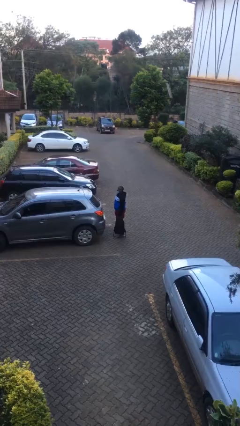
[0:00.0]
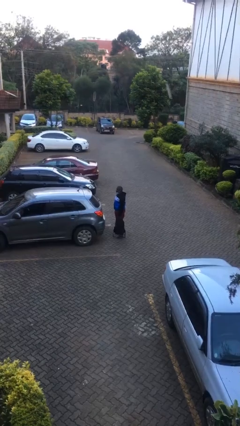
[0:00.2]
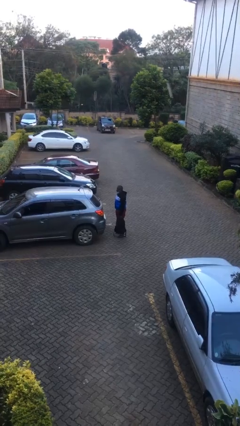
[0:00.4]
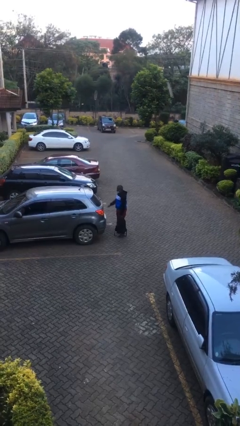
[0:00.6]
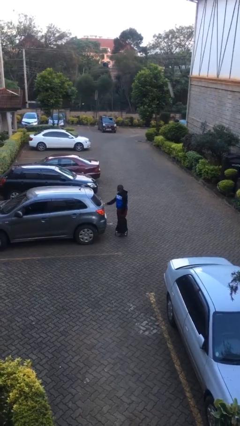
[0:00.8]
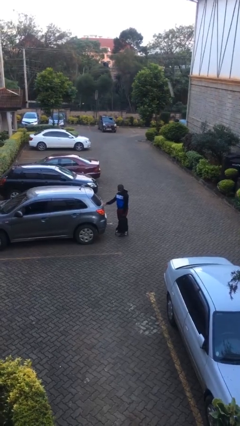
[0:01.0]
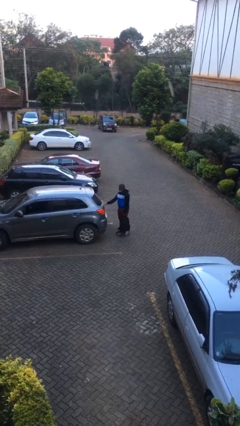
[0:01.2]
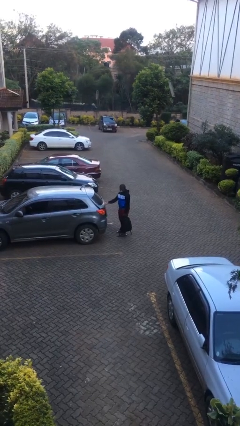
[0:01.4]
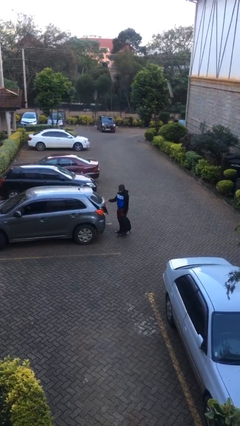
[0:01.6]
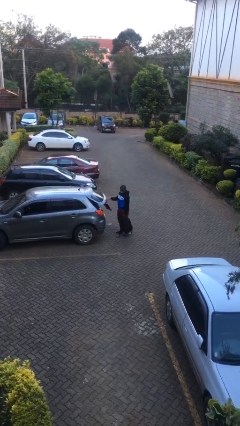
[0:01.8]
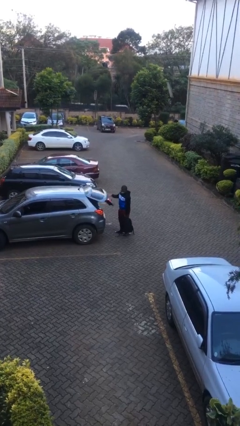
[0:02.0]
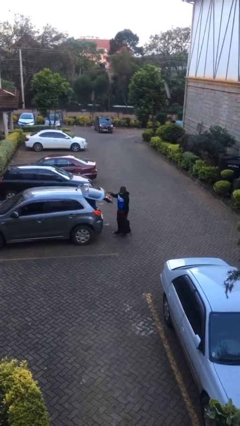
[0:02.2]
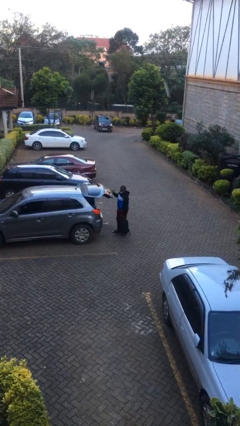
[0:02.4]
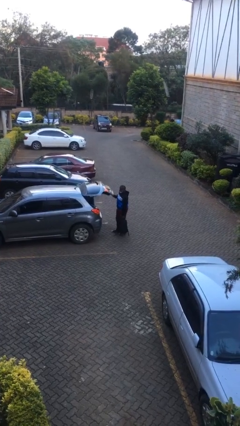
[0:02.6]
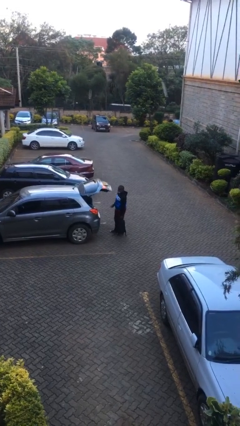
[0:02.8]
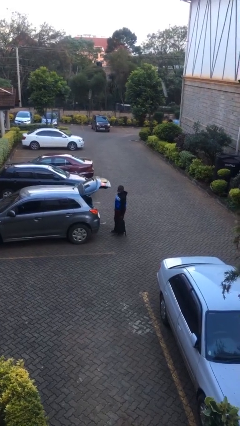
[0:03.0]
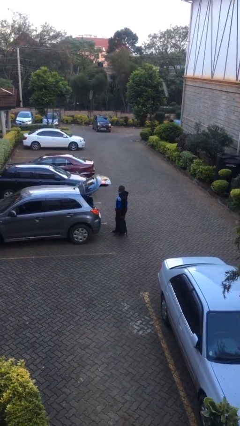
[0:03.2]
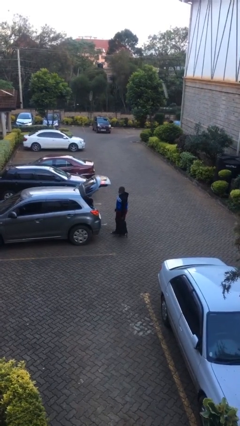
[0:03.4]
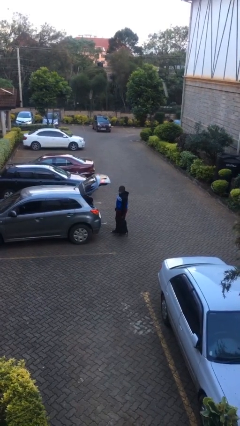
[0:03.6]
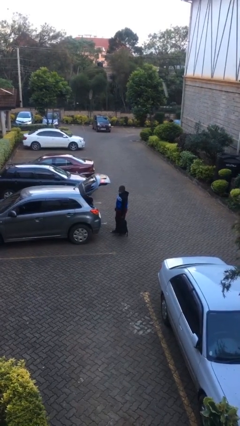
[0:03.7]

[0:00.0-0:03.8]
person opens car trunk

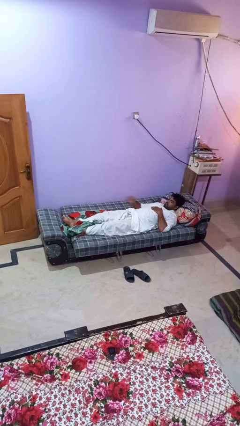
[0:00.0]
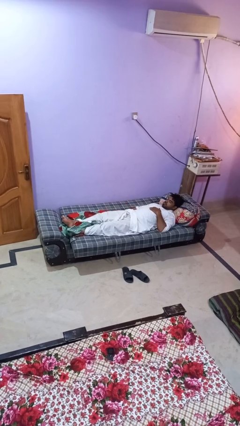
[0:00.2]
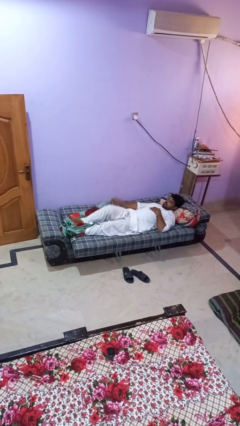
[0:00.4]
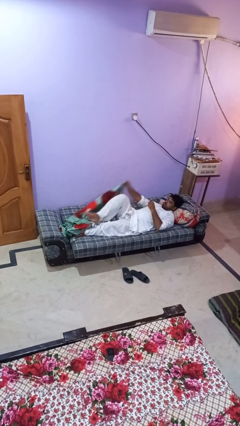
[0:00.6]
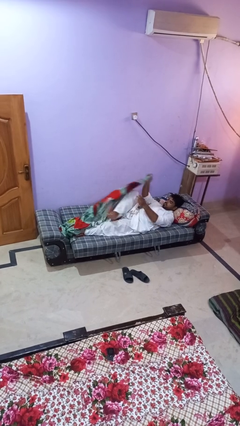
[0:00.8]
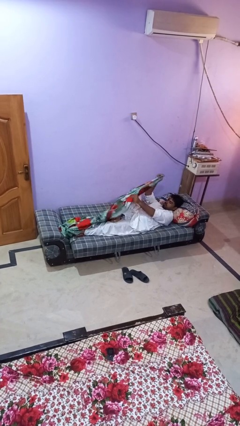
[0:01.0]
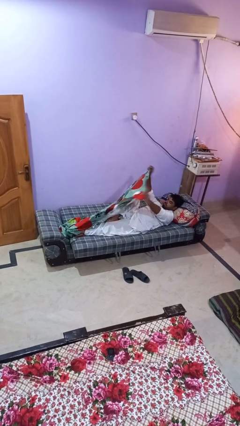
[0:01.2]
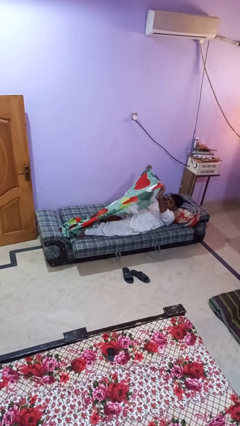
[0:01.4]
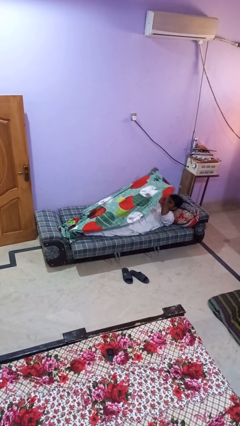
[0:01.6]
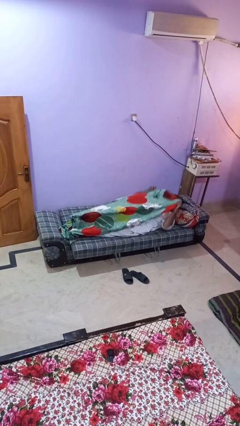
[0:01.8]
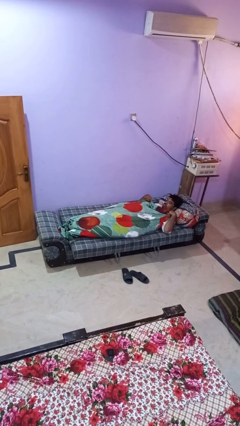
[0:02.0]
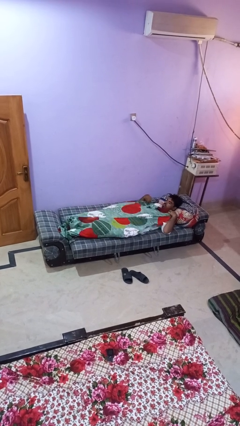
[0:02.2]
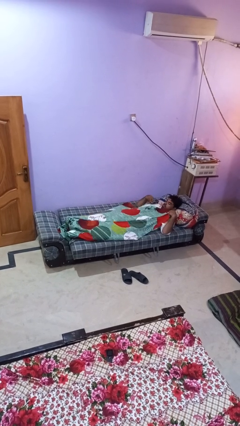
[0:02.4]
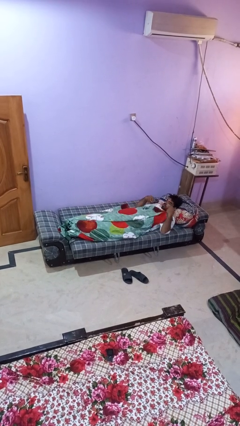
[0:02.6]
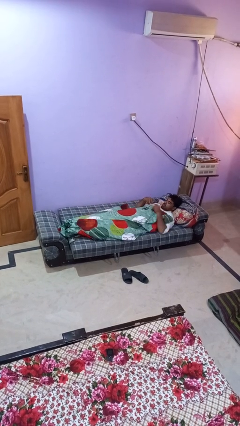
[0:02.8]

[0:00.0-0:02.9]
person covers with bedsheets

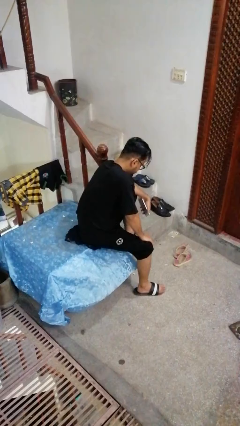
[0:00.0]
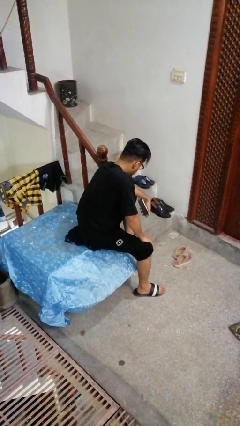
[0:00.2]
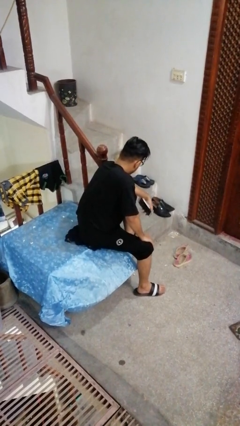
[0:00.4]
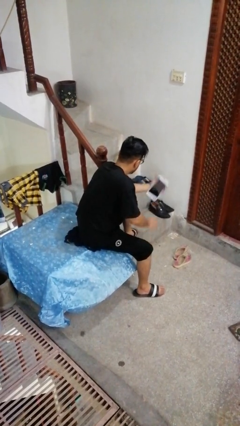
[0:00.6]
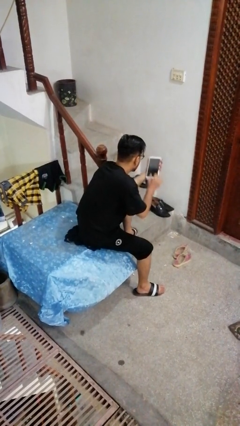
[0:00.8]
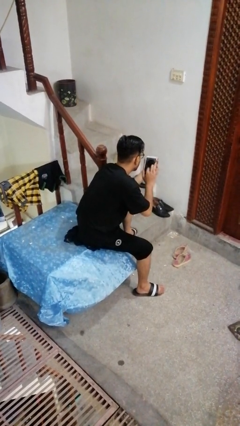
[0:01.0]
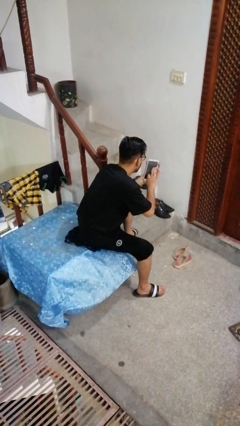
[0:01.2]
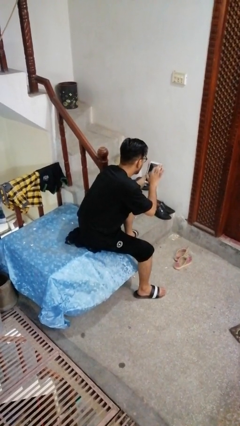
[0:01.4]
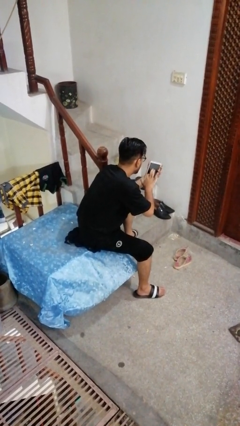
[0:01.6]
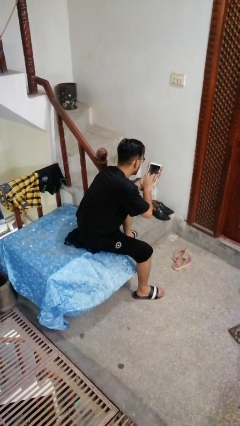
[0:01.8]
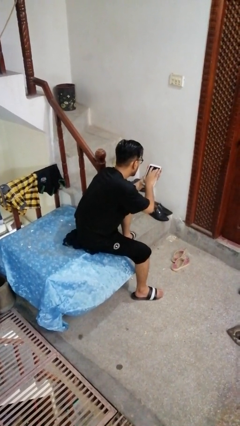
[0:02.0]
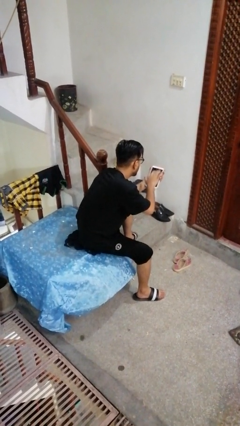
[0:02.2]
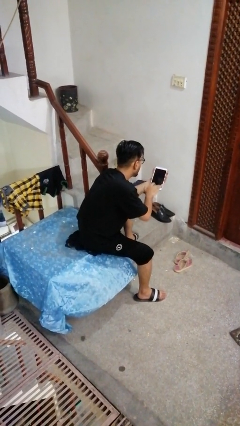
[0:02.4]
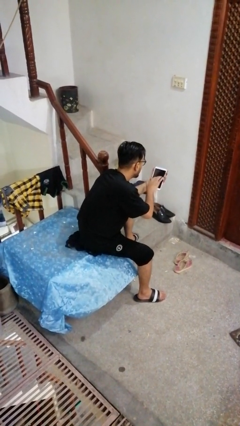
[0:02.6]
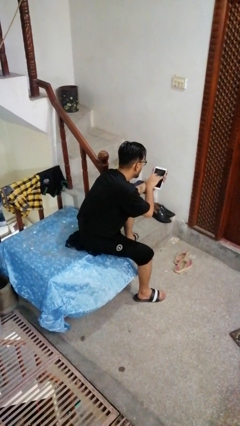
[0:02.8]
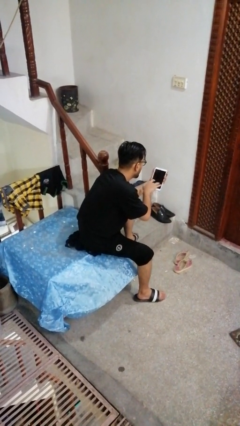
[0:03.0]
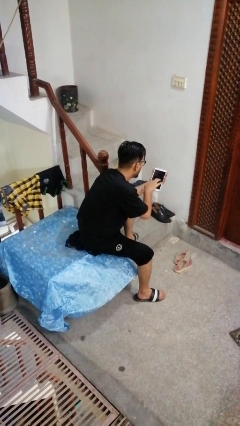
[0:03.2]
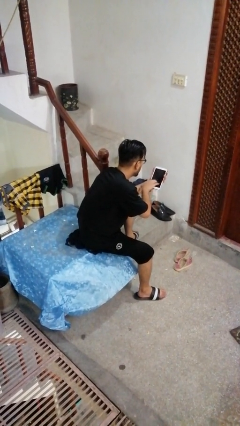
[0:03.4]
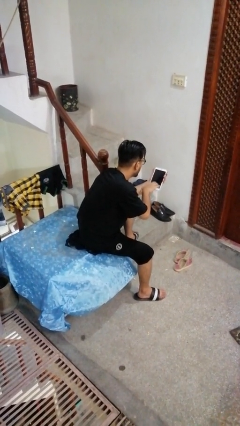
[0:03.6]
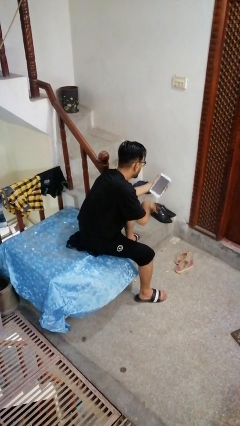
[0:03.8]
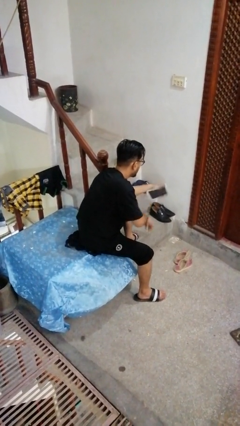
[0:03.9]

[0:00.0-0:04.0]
person interacts with tablet

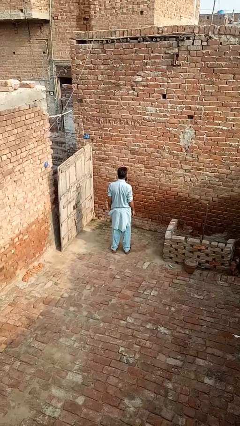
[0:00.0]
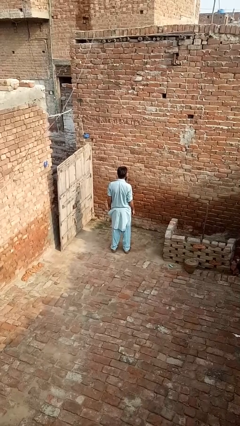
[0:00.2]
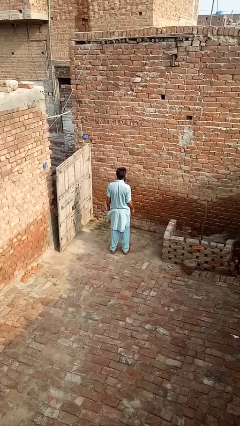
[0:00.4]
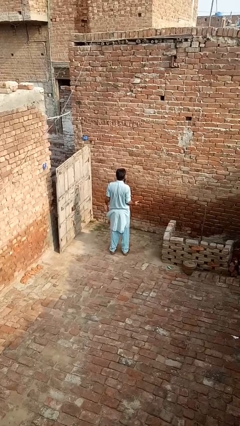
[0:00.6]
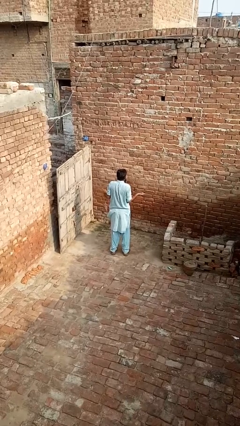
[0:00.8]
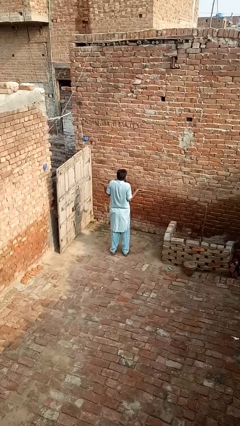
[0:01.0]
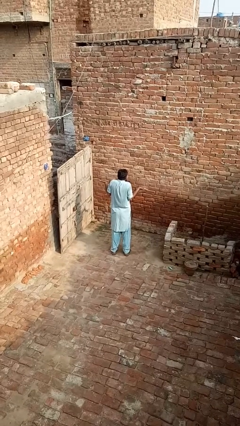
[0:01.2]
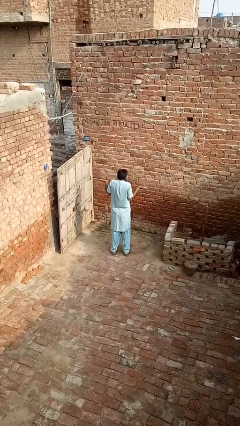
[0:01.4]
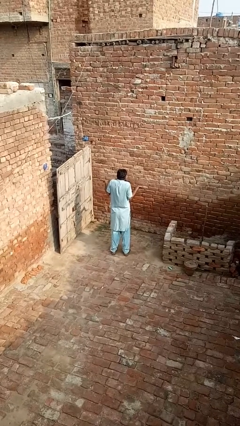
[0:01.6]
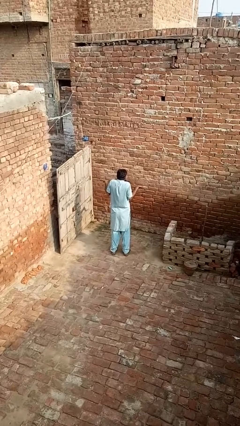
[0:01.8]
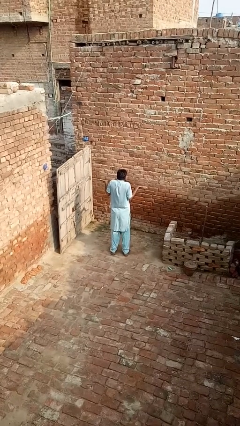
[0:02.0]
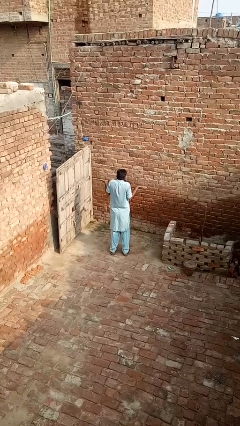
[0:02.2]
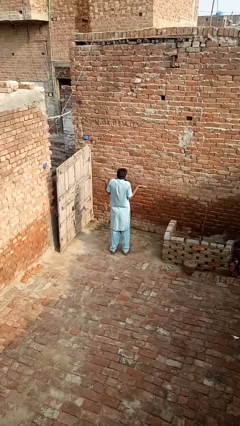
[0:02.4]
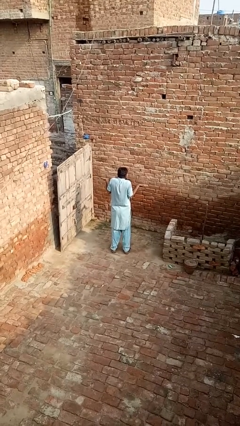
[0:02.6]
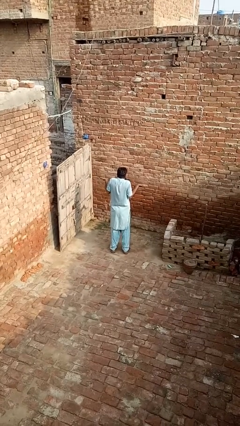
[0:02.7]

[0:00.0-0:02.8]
person shrugs

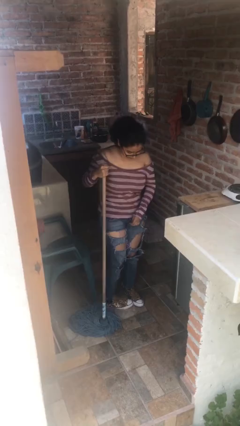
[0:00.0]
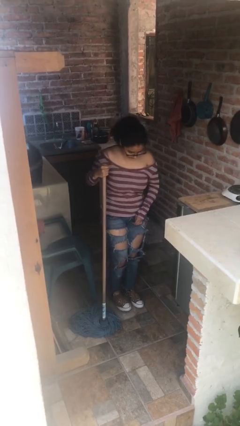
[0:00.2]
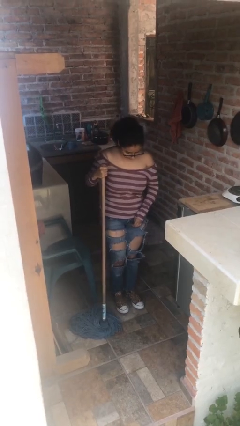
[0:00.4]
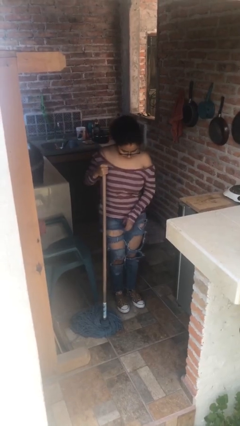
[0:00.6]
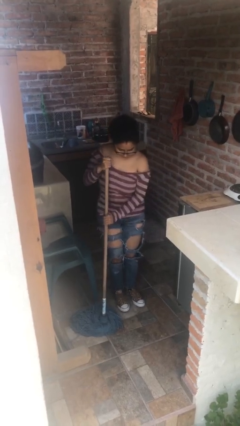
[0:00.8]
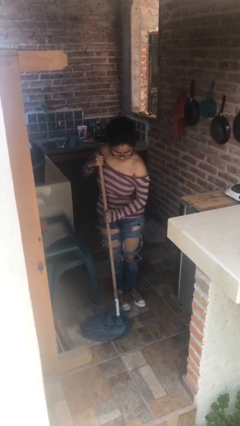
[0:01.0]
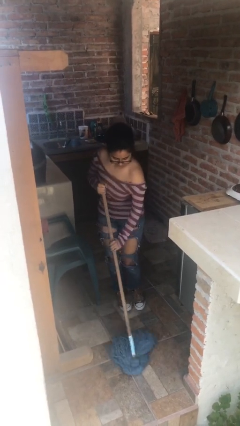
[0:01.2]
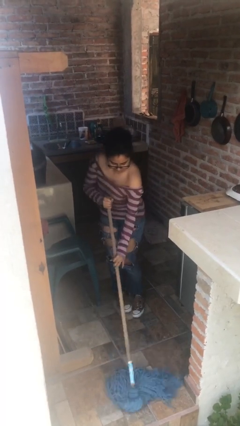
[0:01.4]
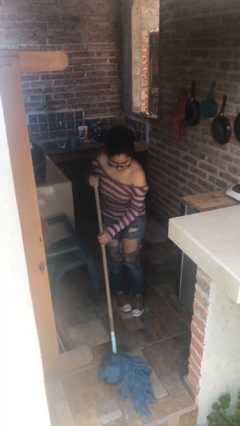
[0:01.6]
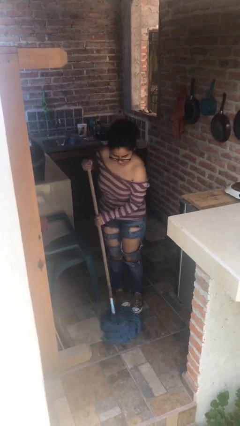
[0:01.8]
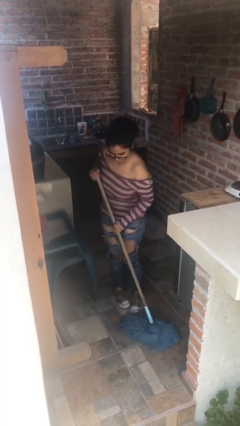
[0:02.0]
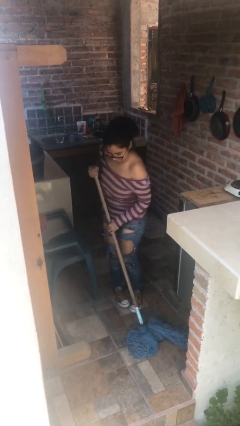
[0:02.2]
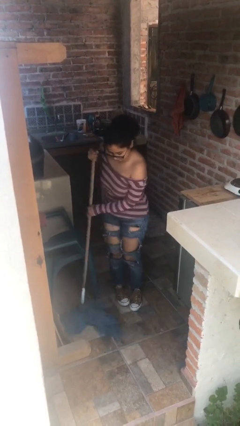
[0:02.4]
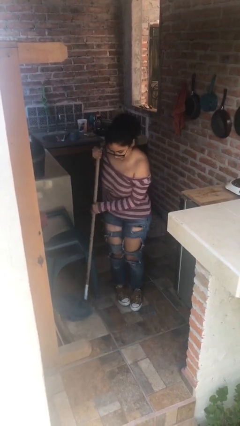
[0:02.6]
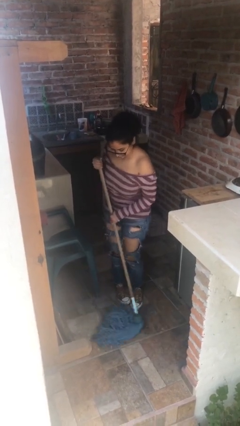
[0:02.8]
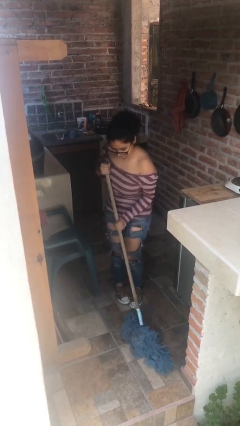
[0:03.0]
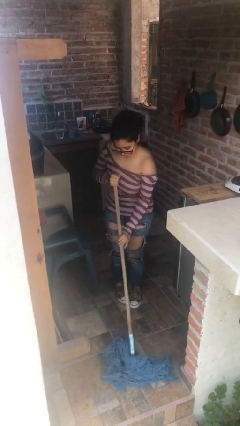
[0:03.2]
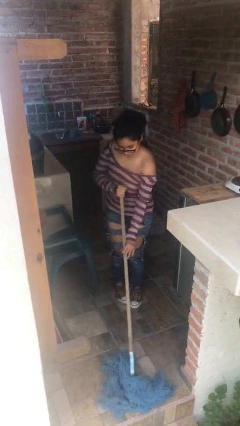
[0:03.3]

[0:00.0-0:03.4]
person mops
